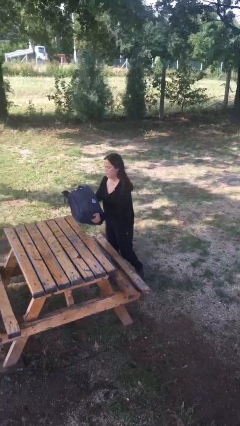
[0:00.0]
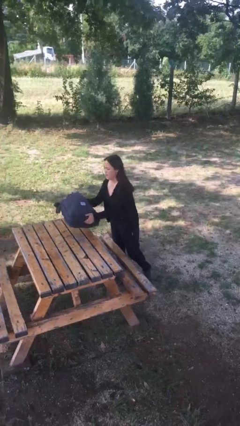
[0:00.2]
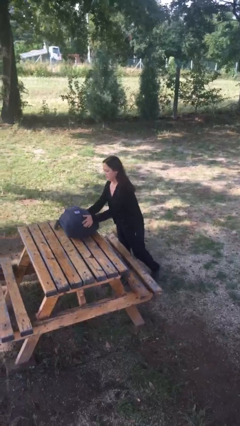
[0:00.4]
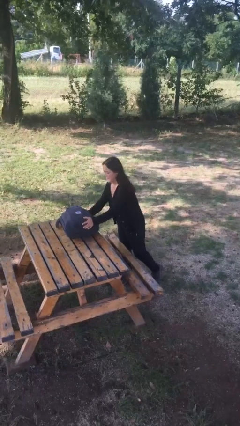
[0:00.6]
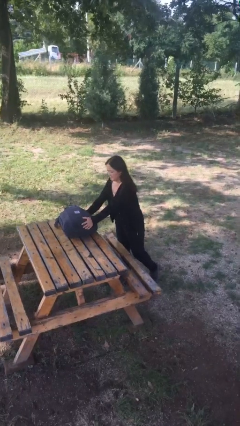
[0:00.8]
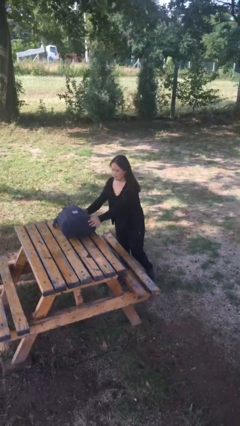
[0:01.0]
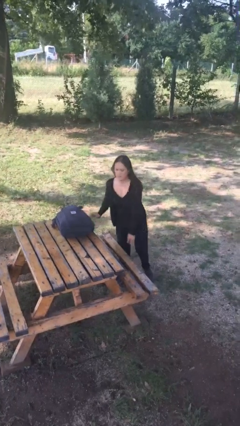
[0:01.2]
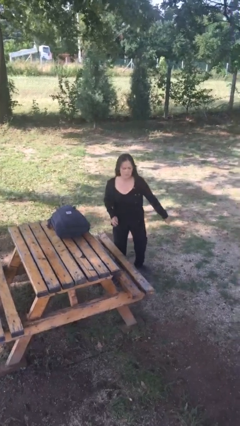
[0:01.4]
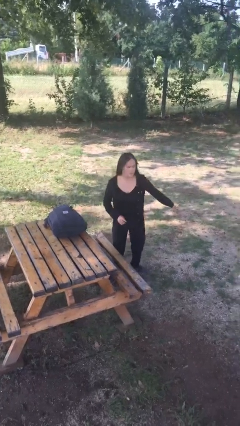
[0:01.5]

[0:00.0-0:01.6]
person puts down object on table

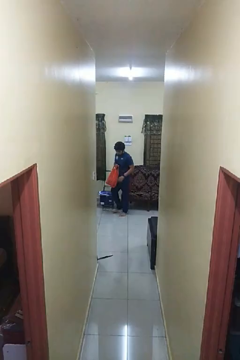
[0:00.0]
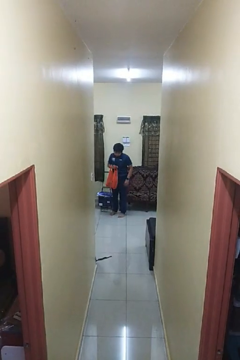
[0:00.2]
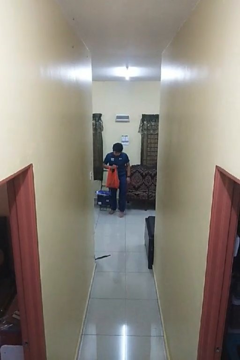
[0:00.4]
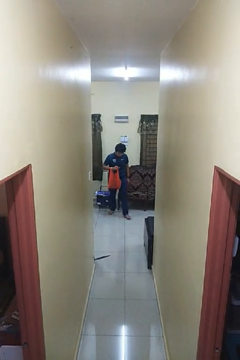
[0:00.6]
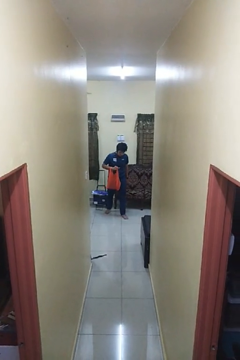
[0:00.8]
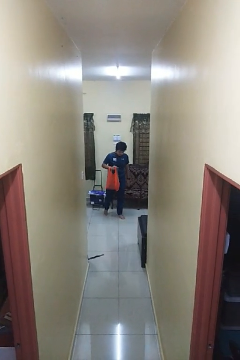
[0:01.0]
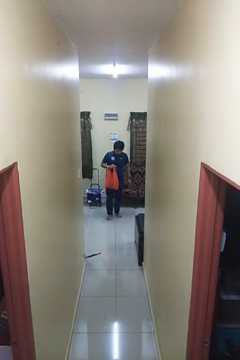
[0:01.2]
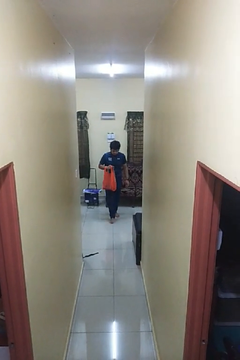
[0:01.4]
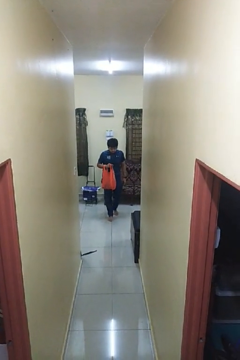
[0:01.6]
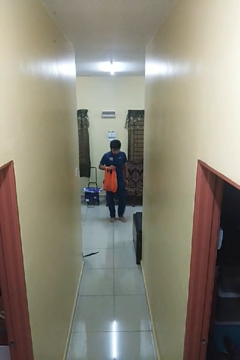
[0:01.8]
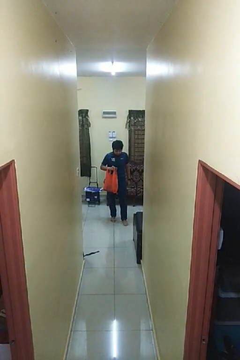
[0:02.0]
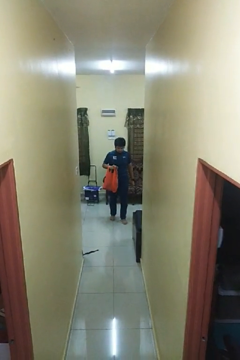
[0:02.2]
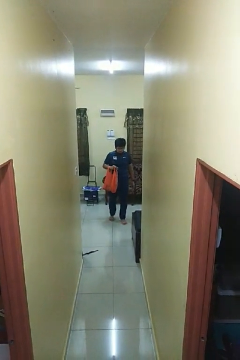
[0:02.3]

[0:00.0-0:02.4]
person carries groceries

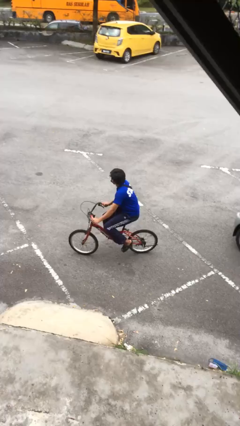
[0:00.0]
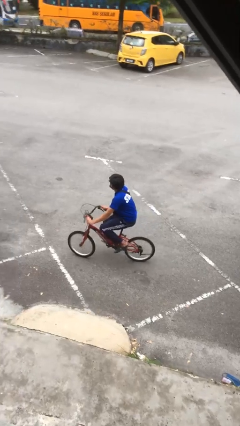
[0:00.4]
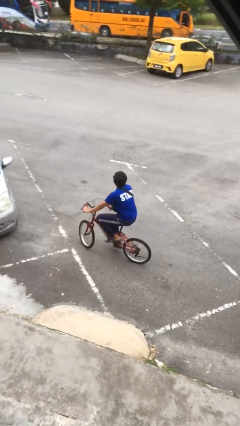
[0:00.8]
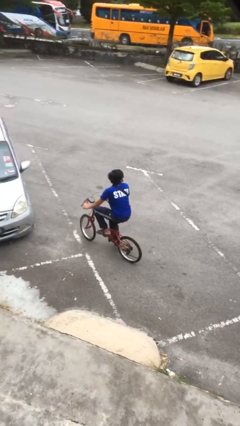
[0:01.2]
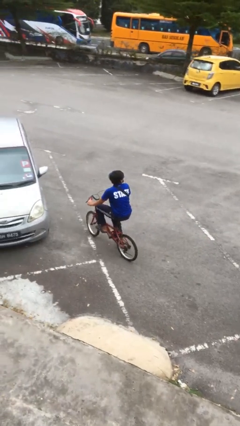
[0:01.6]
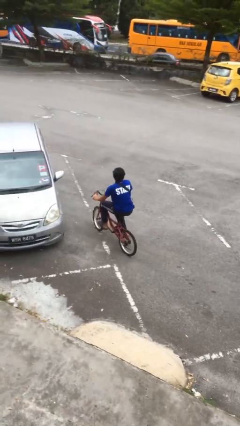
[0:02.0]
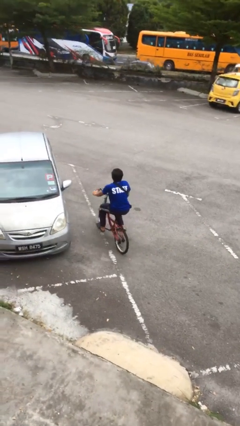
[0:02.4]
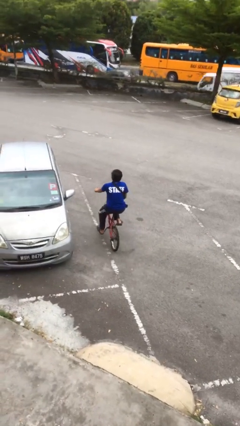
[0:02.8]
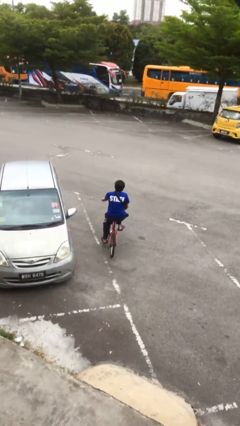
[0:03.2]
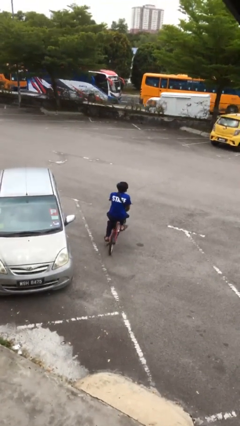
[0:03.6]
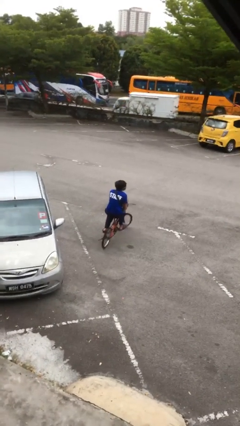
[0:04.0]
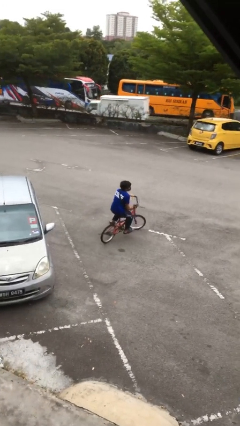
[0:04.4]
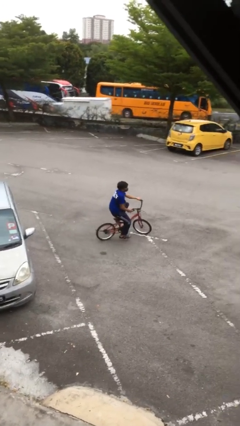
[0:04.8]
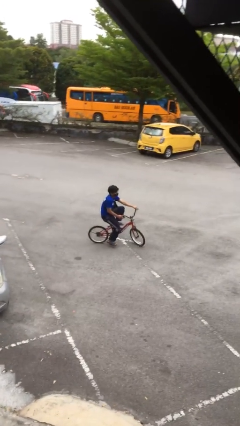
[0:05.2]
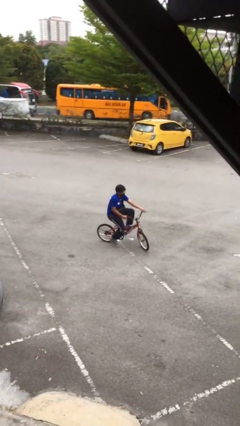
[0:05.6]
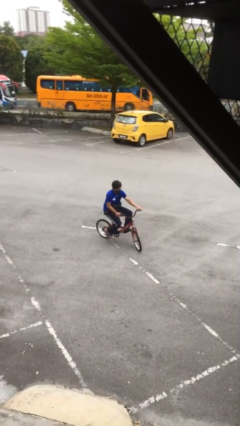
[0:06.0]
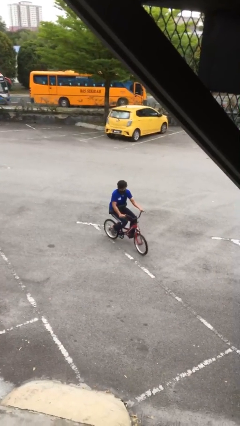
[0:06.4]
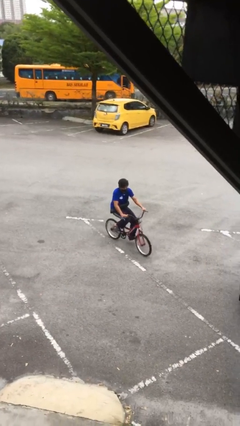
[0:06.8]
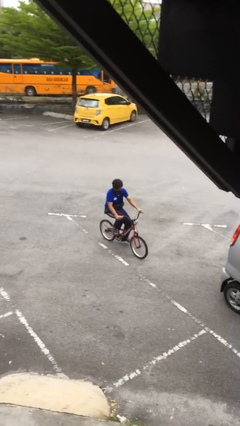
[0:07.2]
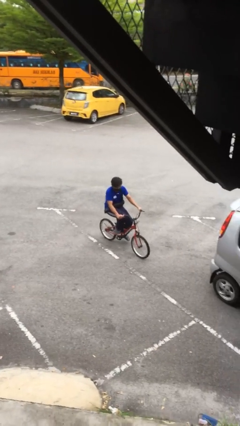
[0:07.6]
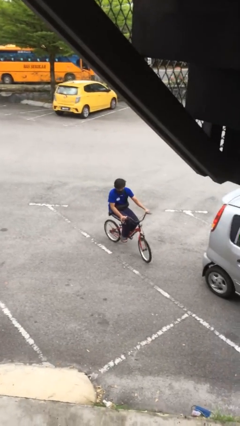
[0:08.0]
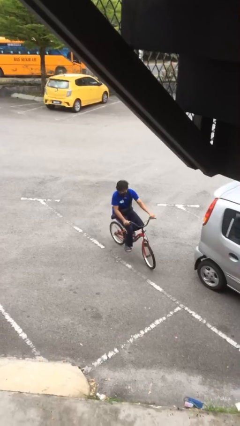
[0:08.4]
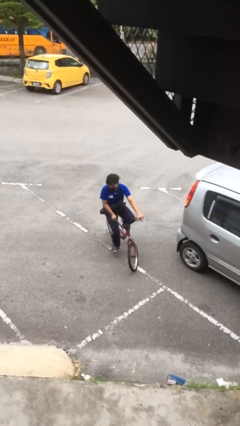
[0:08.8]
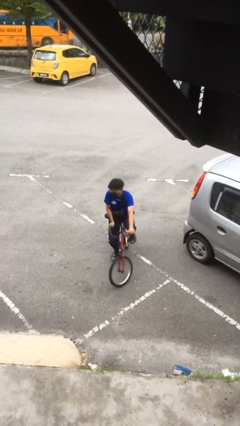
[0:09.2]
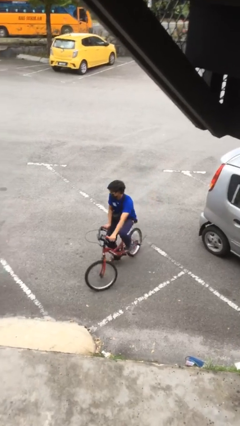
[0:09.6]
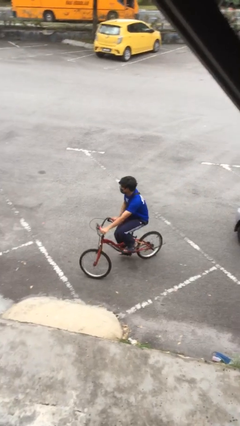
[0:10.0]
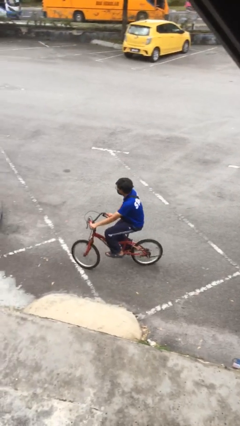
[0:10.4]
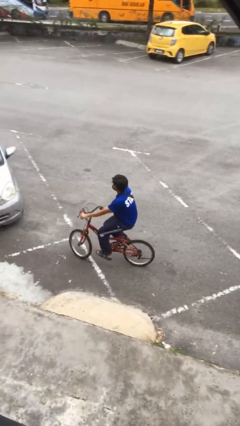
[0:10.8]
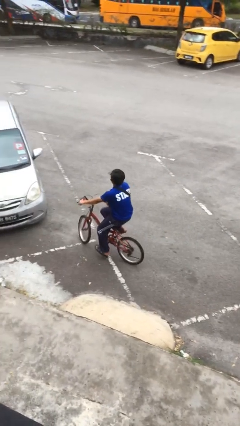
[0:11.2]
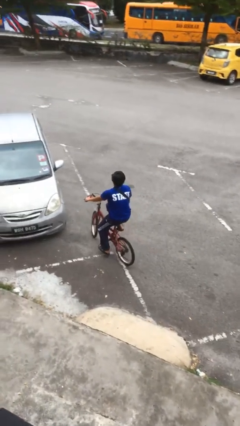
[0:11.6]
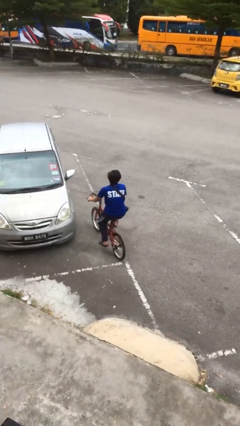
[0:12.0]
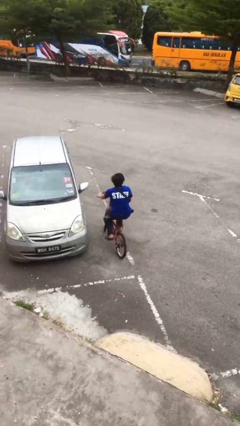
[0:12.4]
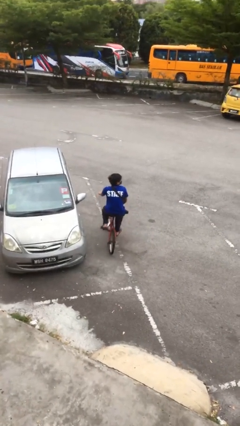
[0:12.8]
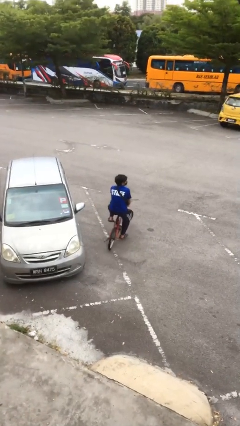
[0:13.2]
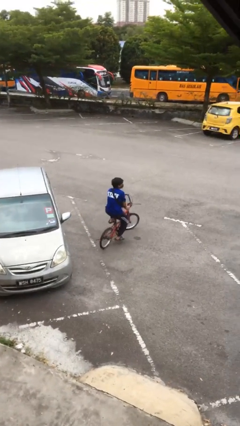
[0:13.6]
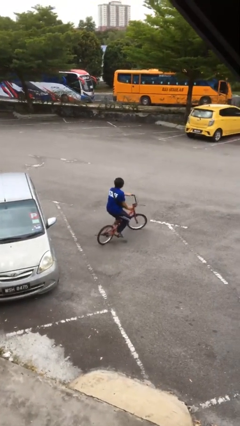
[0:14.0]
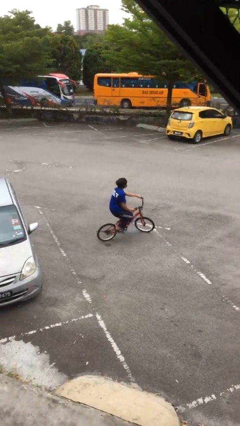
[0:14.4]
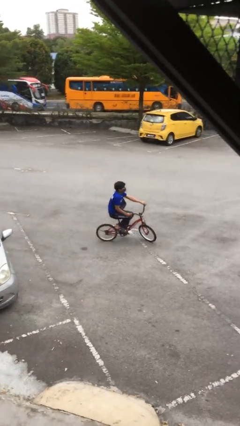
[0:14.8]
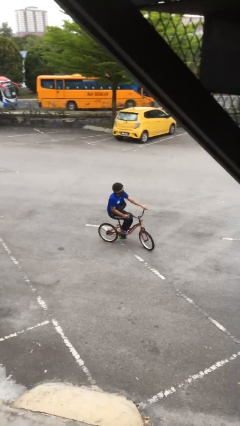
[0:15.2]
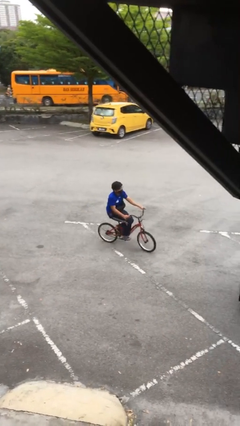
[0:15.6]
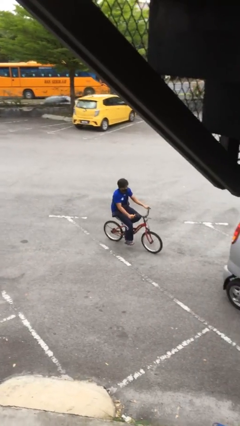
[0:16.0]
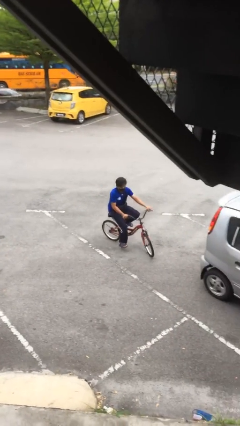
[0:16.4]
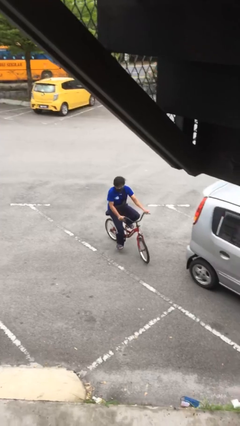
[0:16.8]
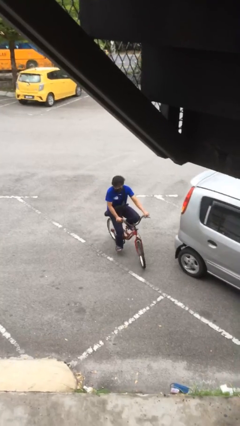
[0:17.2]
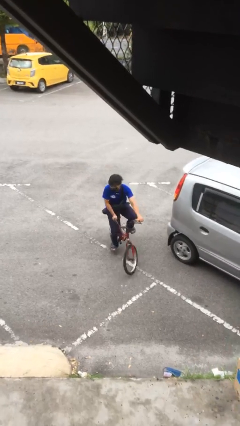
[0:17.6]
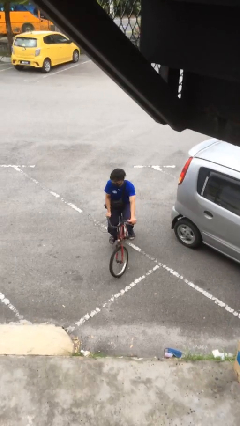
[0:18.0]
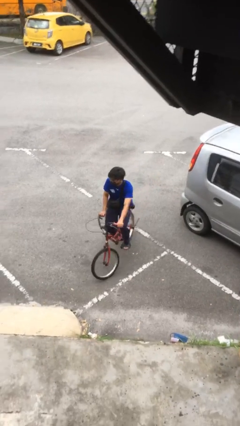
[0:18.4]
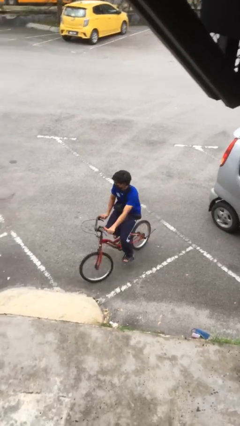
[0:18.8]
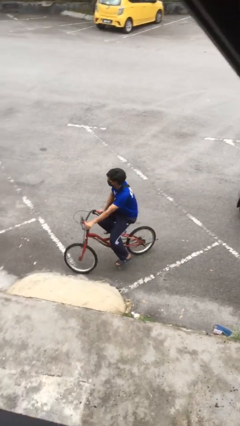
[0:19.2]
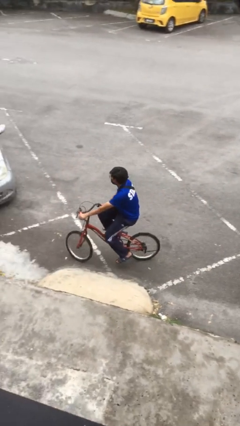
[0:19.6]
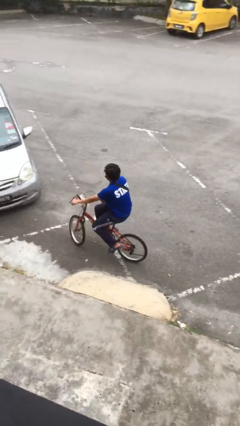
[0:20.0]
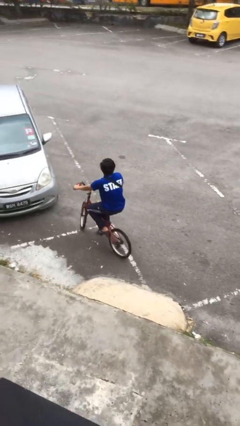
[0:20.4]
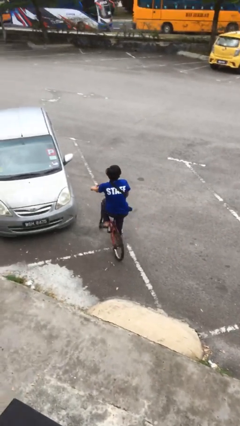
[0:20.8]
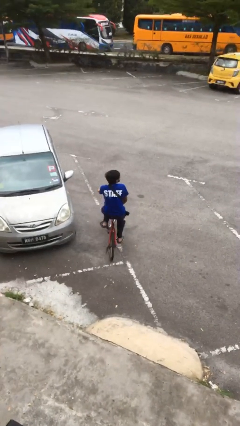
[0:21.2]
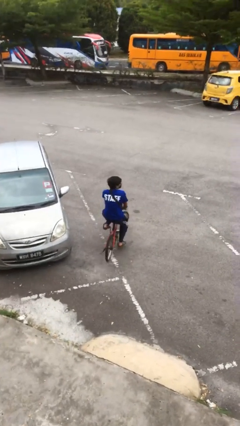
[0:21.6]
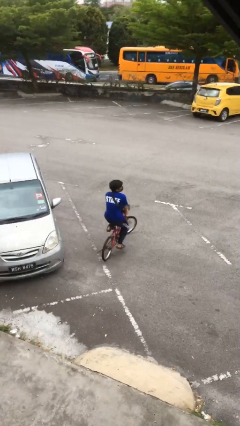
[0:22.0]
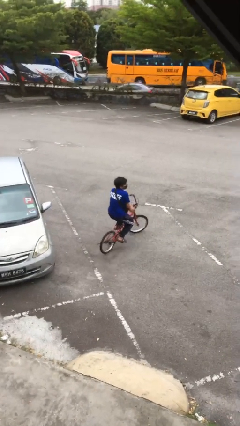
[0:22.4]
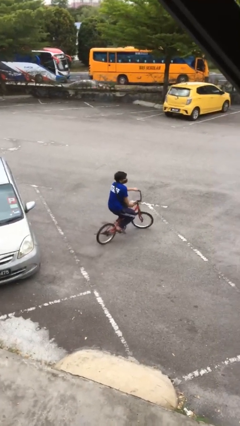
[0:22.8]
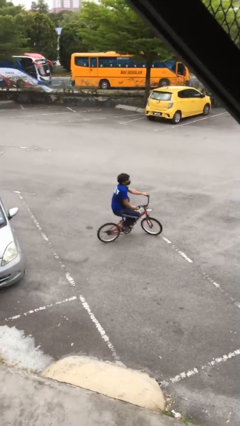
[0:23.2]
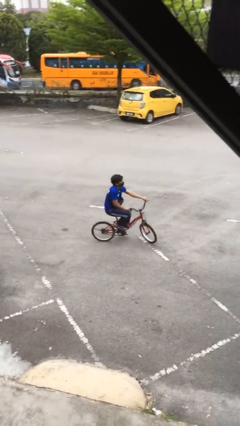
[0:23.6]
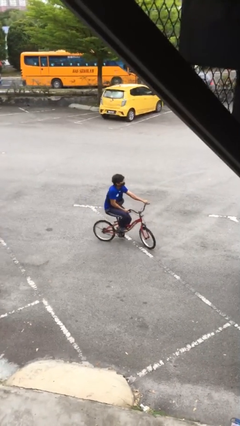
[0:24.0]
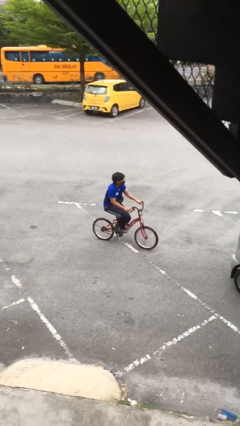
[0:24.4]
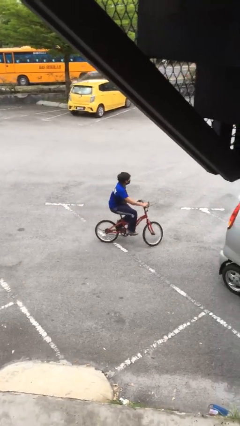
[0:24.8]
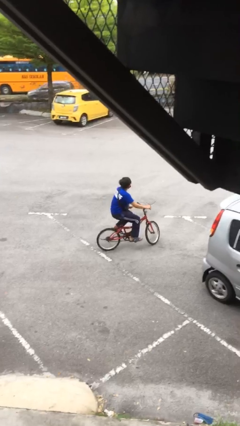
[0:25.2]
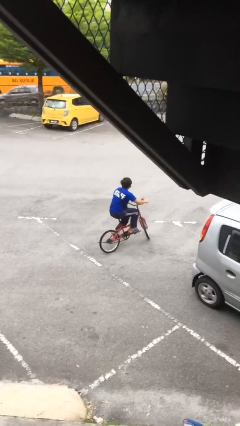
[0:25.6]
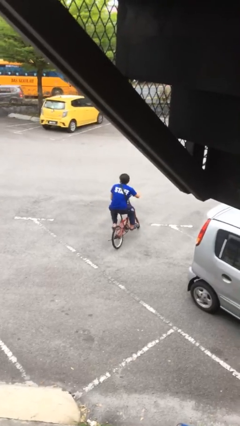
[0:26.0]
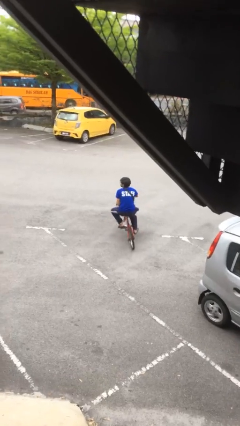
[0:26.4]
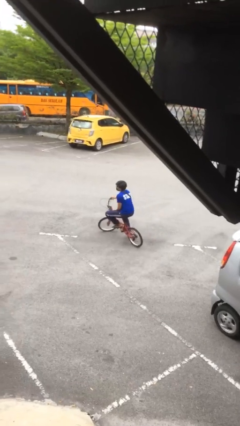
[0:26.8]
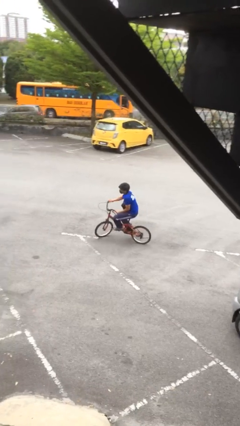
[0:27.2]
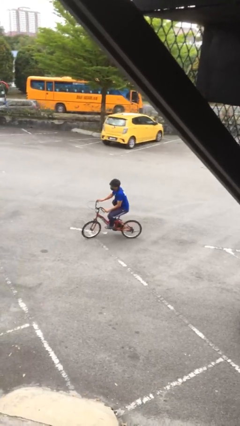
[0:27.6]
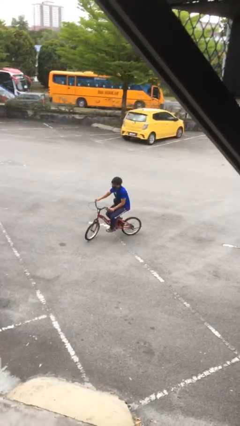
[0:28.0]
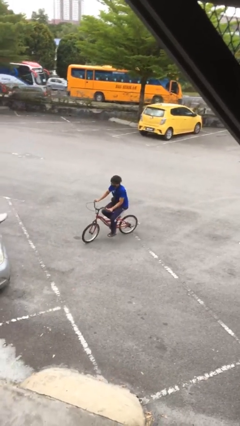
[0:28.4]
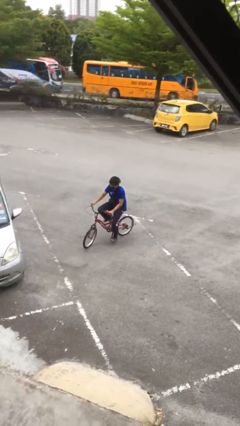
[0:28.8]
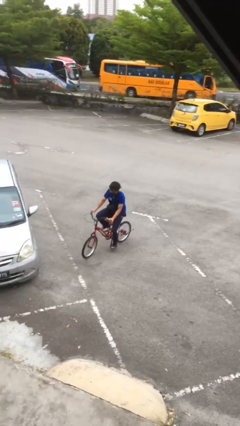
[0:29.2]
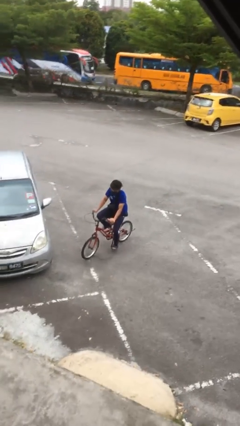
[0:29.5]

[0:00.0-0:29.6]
person rides bicycle
